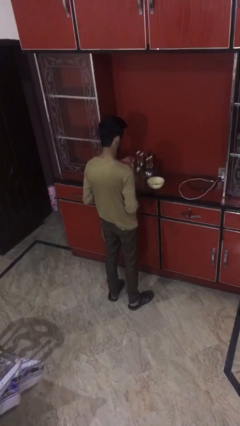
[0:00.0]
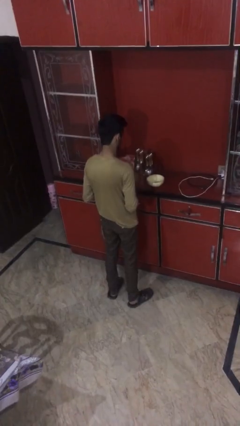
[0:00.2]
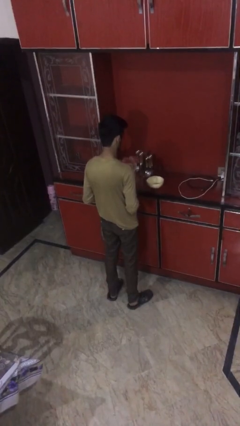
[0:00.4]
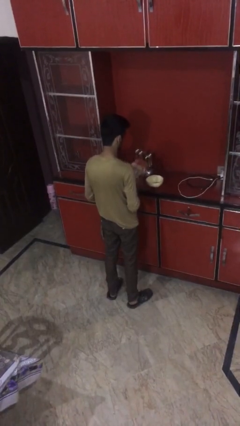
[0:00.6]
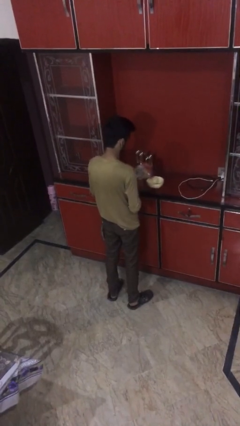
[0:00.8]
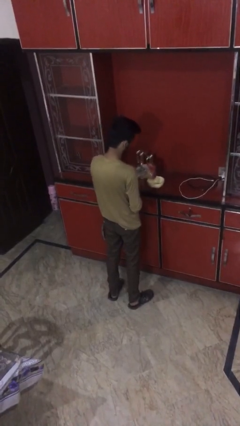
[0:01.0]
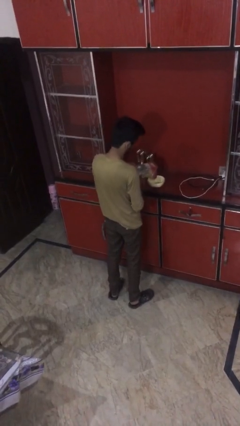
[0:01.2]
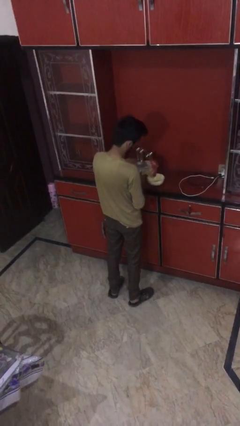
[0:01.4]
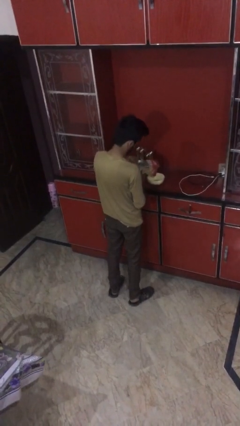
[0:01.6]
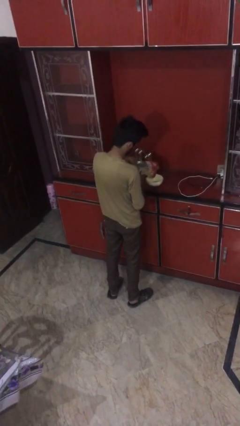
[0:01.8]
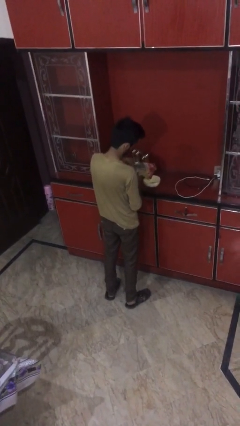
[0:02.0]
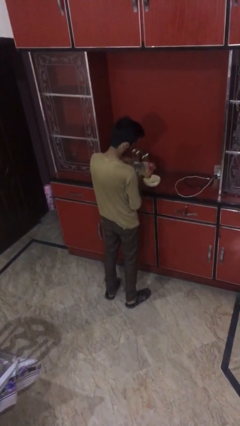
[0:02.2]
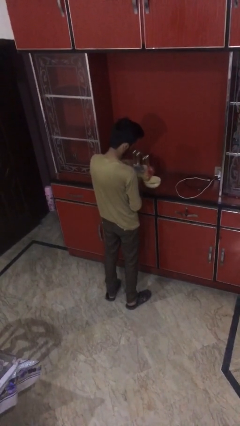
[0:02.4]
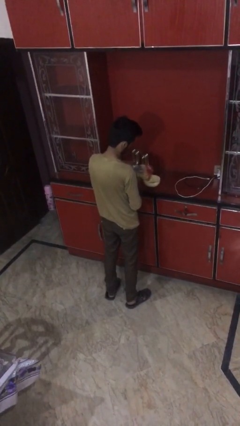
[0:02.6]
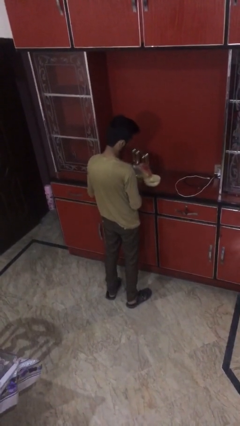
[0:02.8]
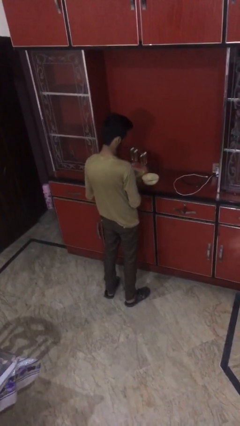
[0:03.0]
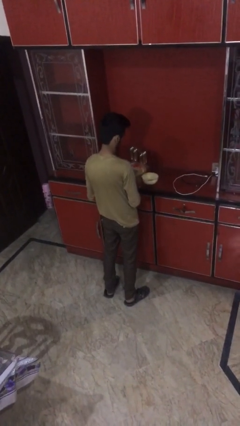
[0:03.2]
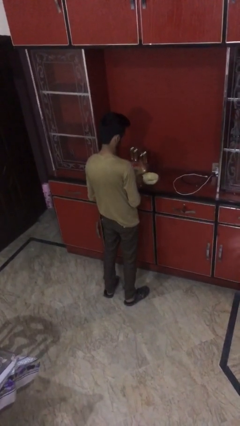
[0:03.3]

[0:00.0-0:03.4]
person pours into bowl

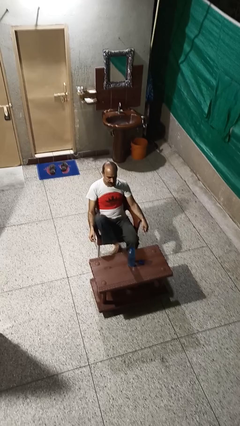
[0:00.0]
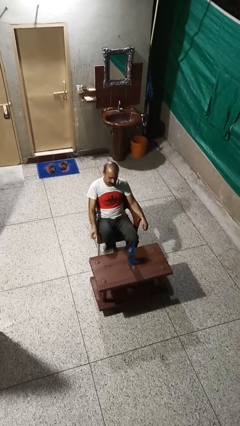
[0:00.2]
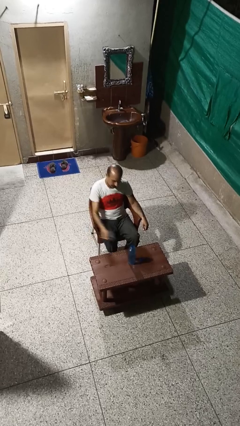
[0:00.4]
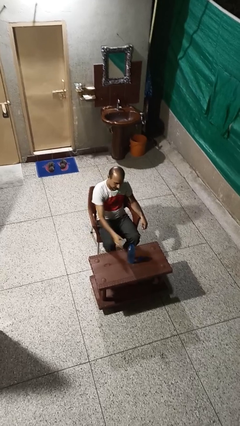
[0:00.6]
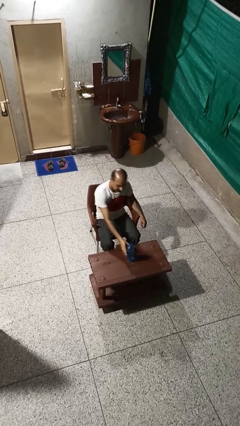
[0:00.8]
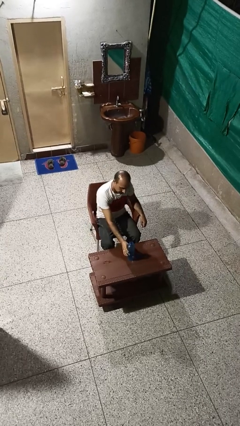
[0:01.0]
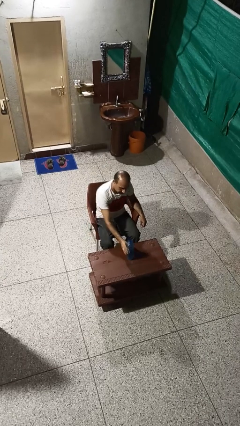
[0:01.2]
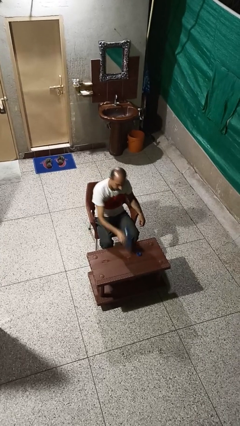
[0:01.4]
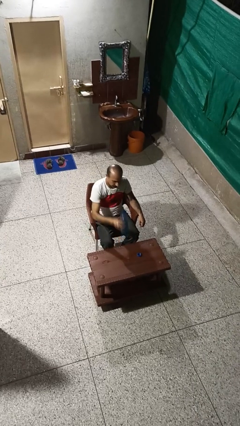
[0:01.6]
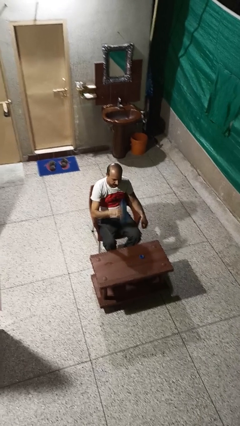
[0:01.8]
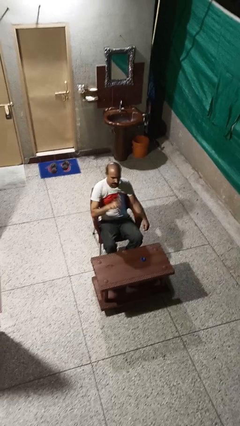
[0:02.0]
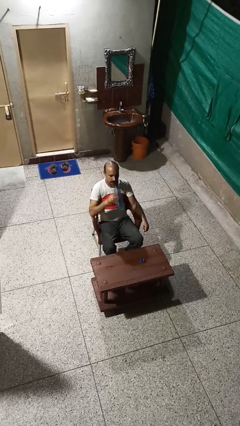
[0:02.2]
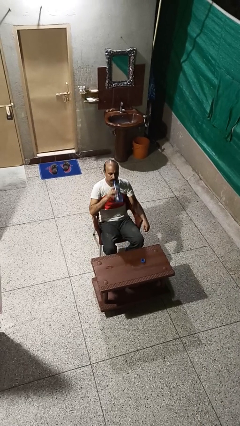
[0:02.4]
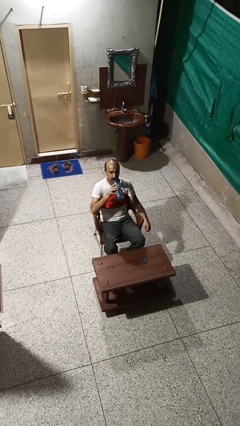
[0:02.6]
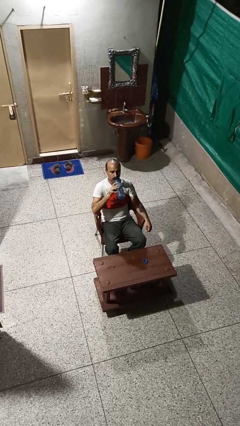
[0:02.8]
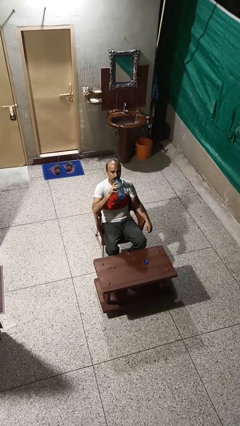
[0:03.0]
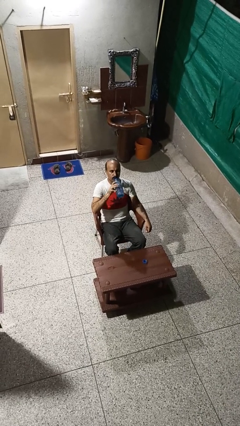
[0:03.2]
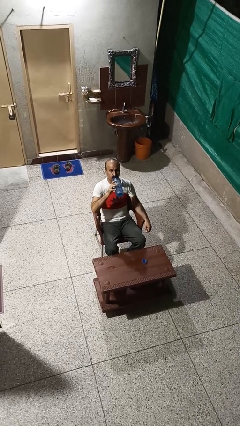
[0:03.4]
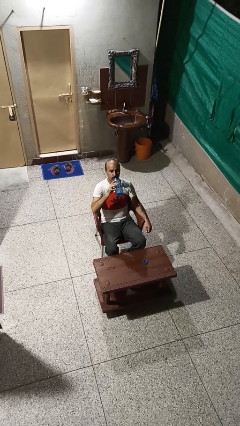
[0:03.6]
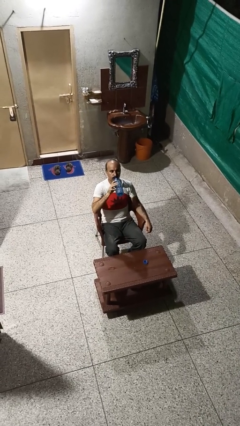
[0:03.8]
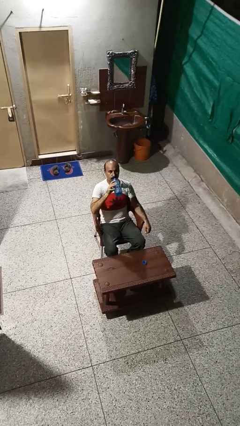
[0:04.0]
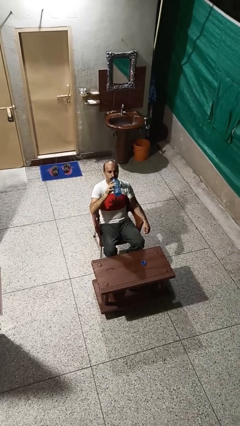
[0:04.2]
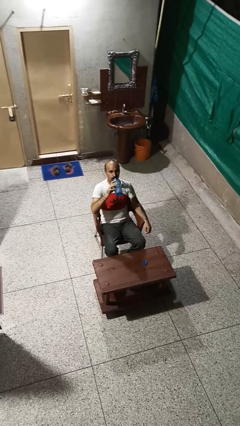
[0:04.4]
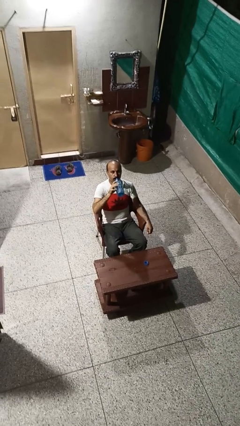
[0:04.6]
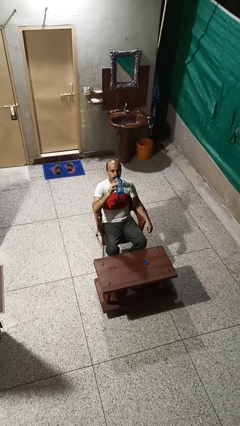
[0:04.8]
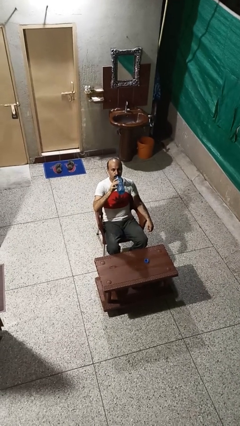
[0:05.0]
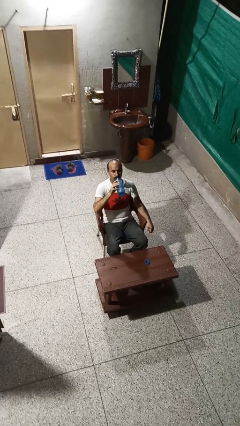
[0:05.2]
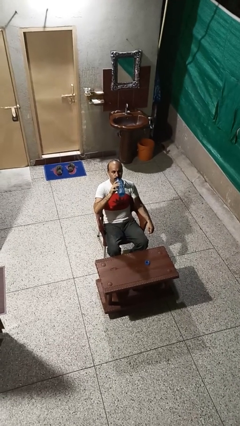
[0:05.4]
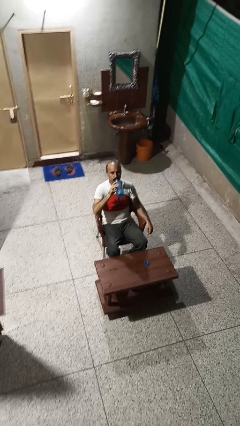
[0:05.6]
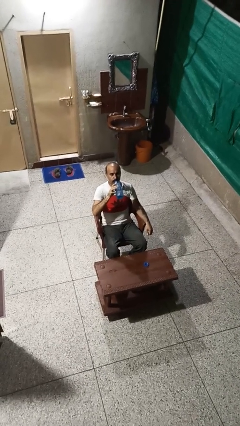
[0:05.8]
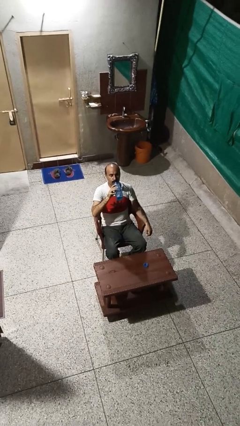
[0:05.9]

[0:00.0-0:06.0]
person drinks from bottle

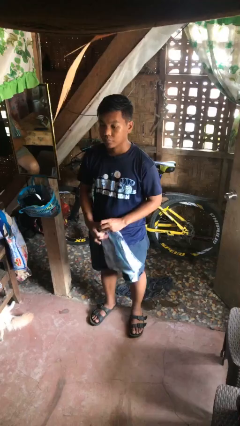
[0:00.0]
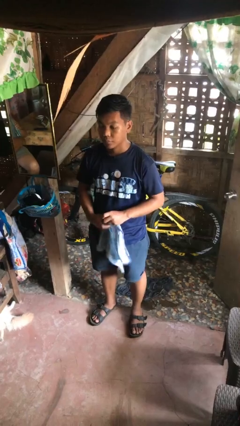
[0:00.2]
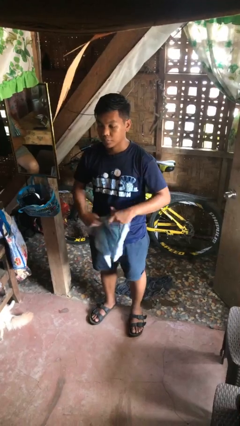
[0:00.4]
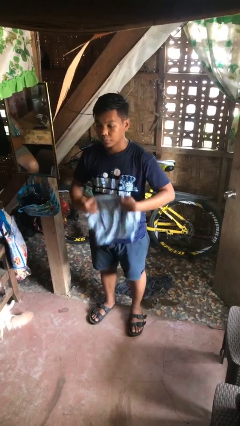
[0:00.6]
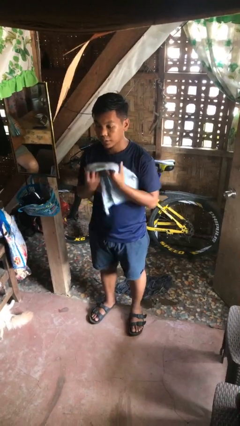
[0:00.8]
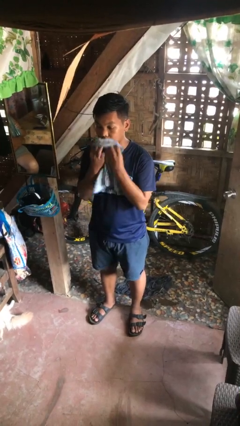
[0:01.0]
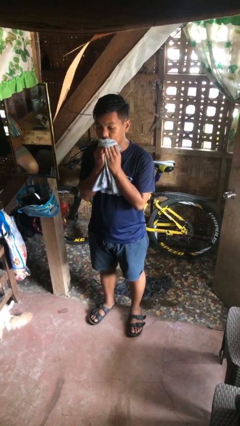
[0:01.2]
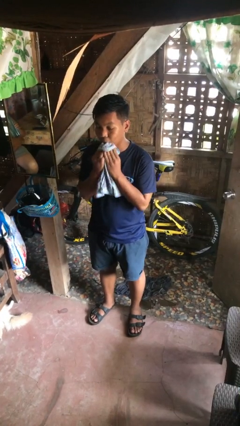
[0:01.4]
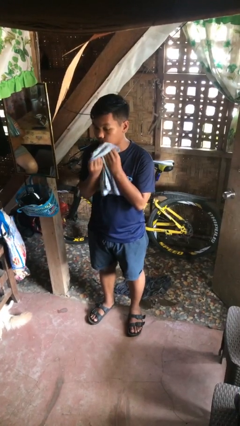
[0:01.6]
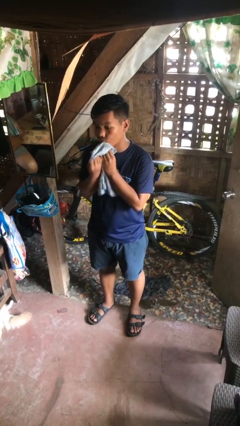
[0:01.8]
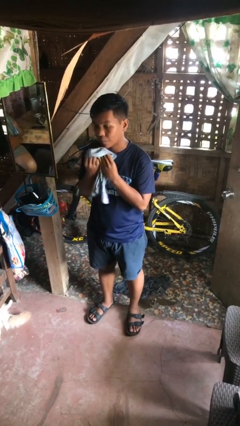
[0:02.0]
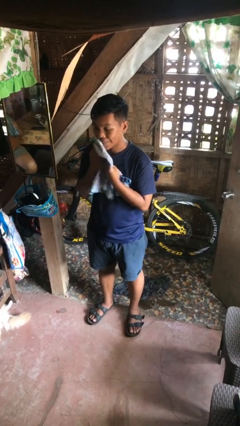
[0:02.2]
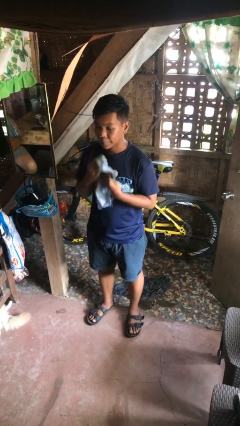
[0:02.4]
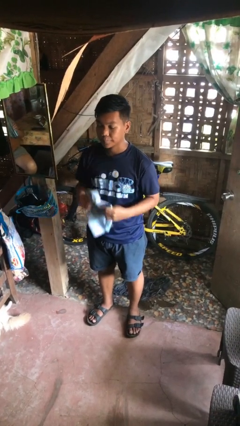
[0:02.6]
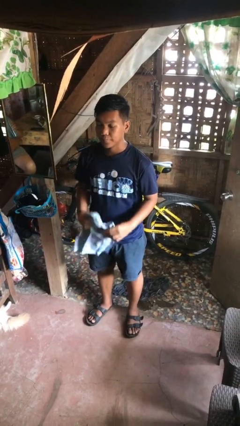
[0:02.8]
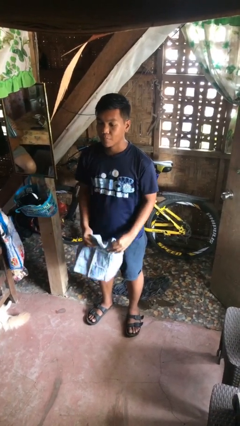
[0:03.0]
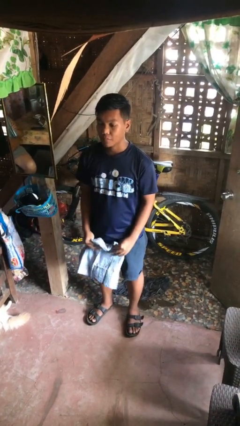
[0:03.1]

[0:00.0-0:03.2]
person wipes mouth with napkin

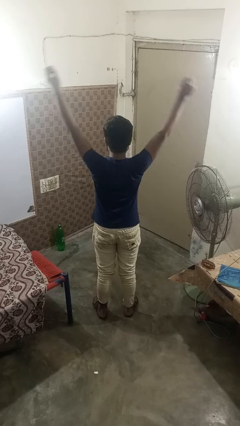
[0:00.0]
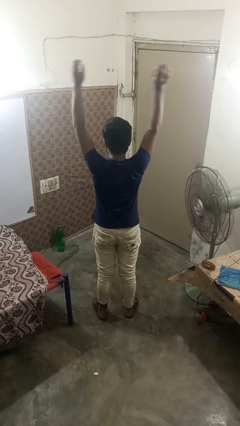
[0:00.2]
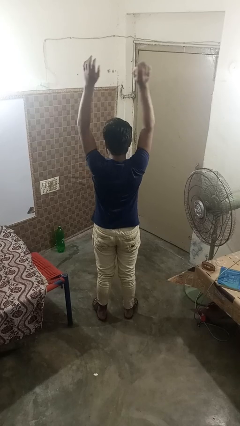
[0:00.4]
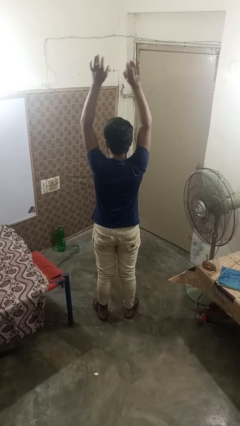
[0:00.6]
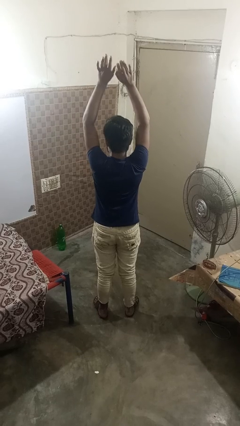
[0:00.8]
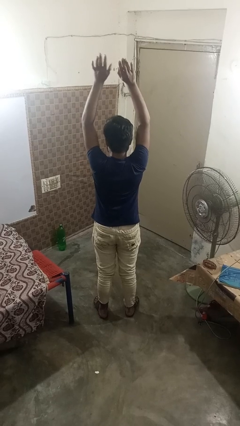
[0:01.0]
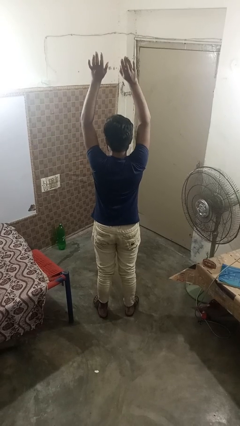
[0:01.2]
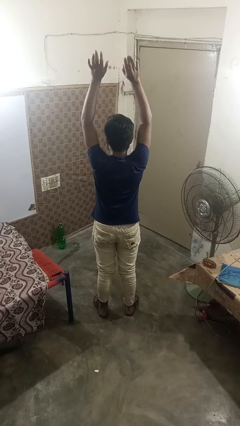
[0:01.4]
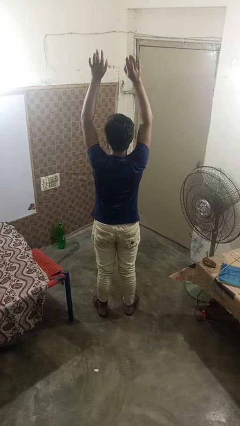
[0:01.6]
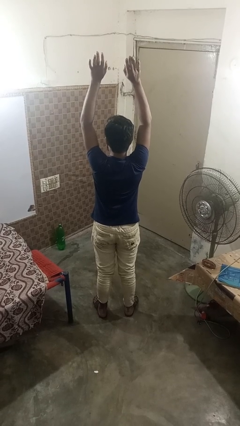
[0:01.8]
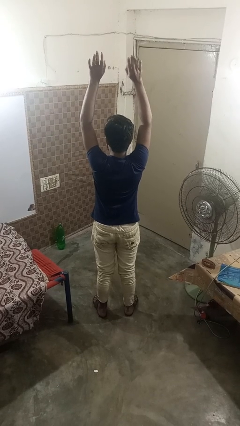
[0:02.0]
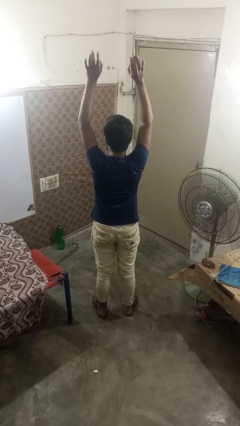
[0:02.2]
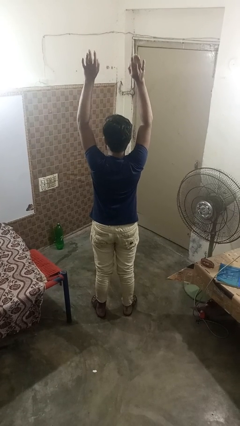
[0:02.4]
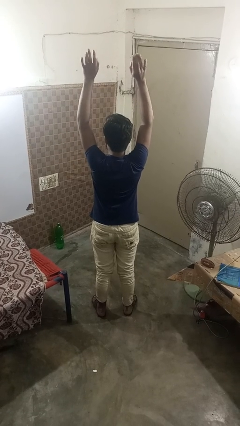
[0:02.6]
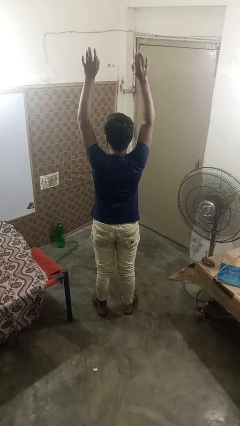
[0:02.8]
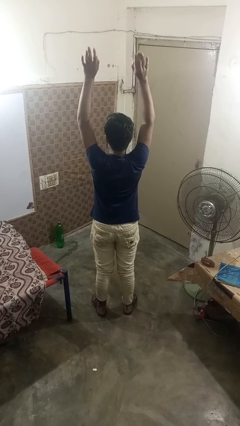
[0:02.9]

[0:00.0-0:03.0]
person stretches arms over head

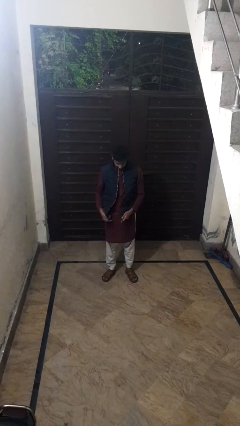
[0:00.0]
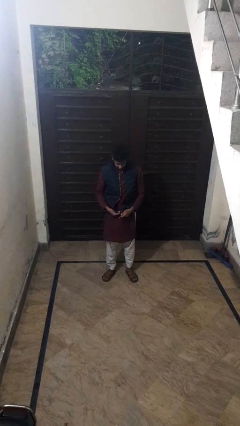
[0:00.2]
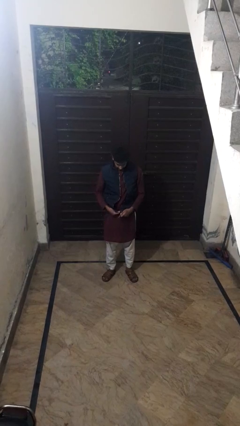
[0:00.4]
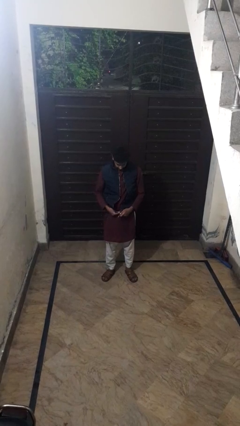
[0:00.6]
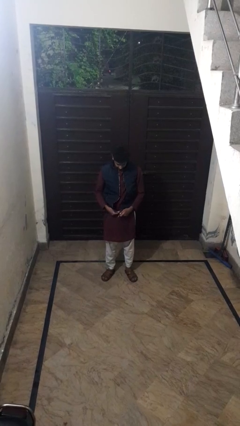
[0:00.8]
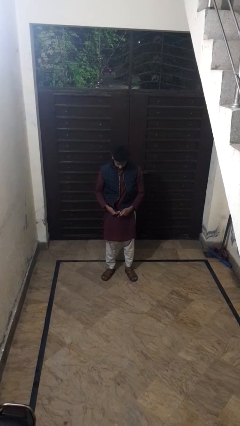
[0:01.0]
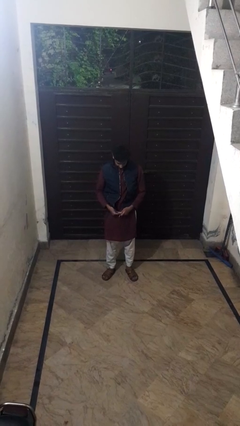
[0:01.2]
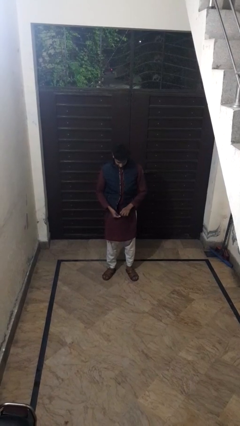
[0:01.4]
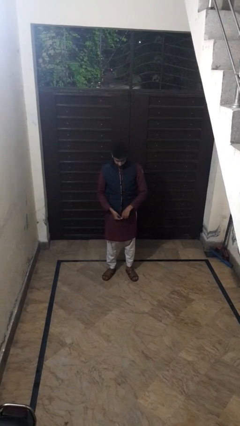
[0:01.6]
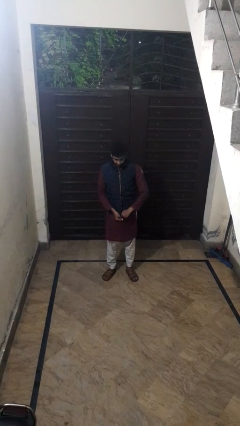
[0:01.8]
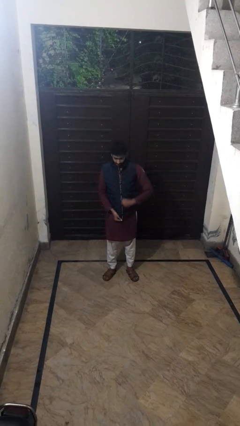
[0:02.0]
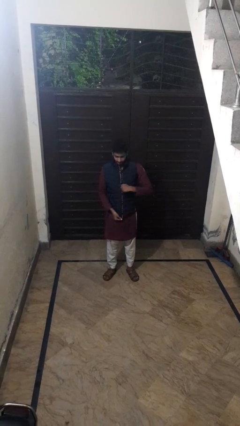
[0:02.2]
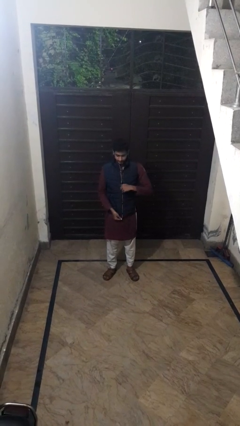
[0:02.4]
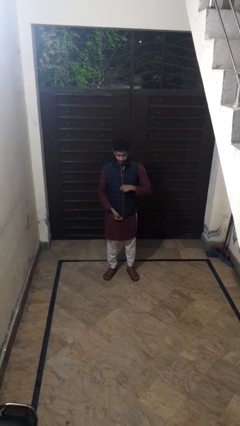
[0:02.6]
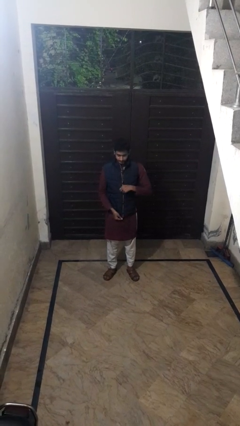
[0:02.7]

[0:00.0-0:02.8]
person zips up jacket
